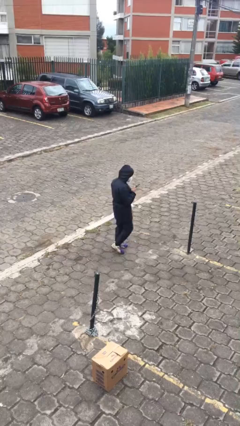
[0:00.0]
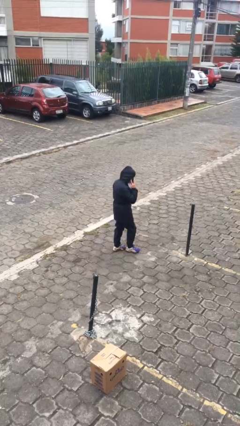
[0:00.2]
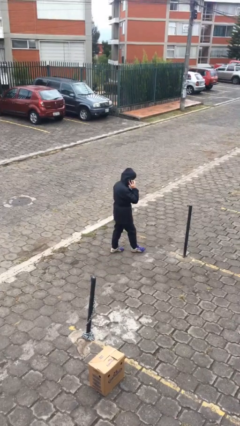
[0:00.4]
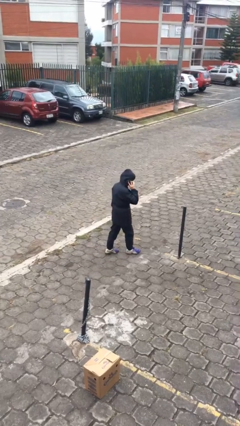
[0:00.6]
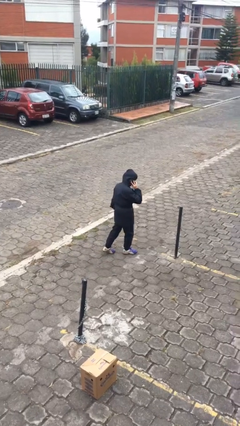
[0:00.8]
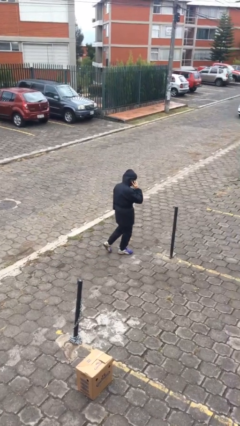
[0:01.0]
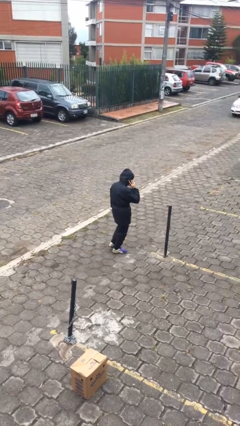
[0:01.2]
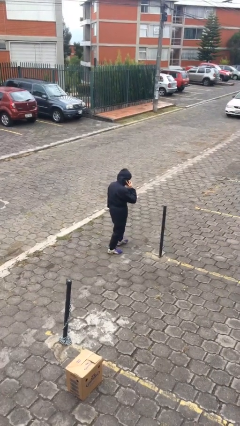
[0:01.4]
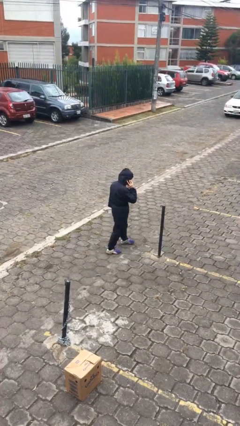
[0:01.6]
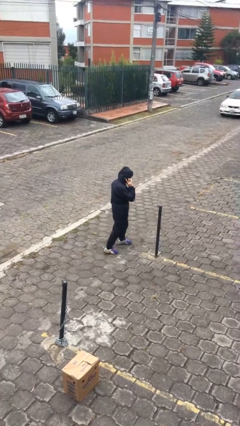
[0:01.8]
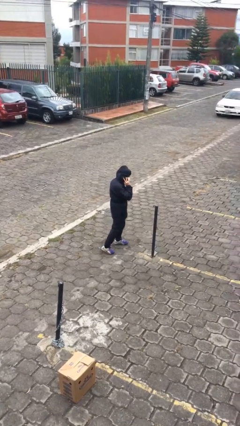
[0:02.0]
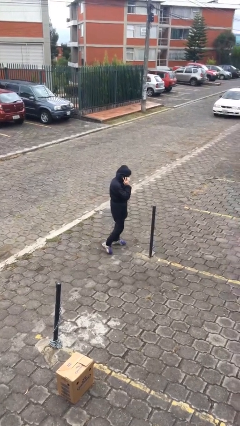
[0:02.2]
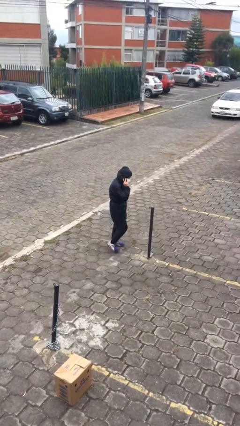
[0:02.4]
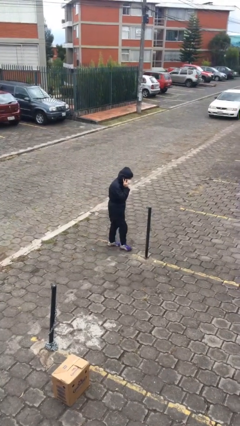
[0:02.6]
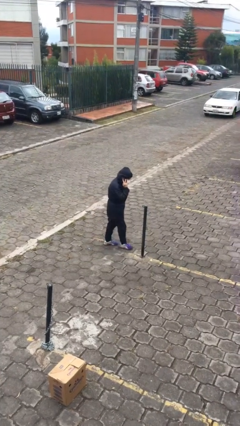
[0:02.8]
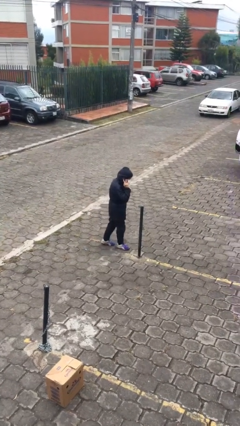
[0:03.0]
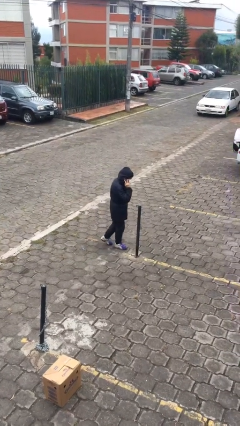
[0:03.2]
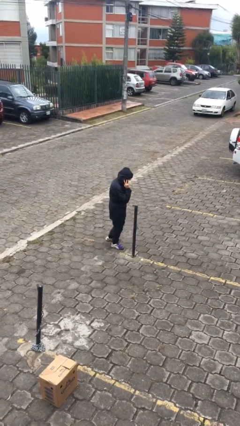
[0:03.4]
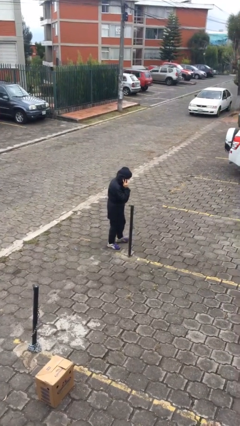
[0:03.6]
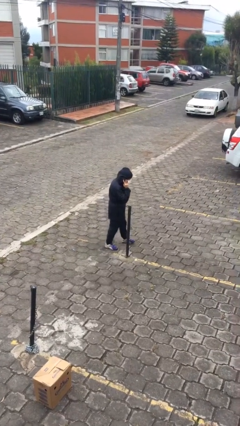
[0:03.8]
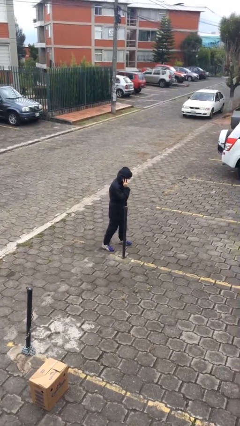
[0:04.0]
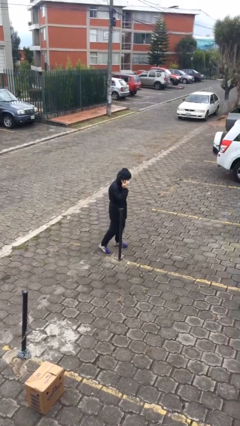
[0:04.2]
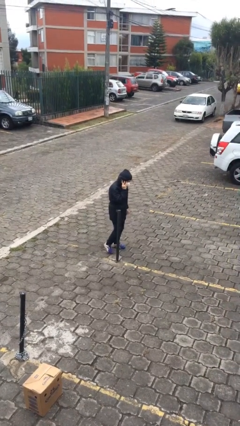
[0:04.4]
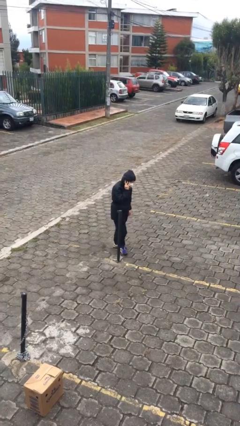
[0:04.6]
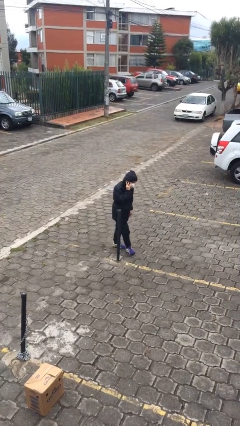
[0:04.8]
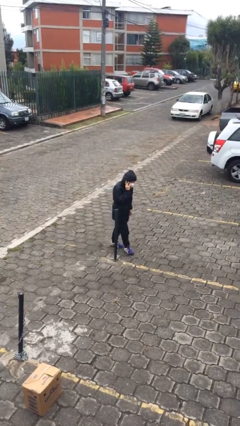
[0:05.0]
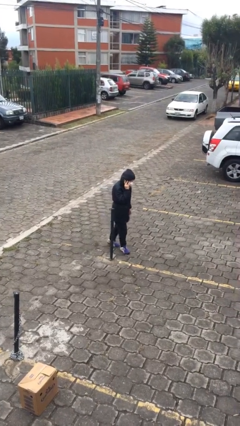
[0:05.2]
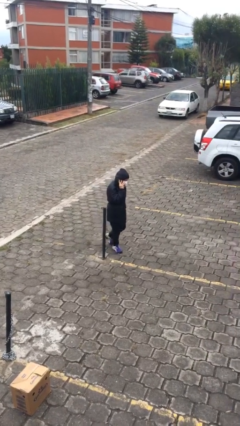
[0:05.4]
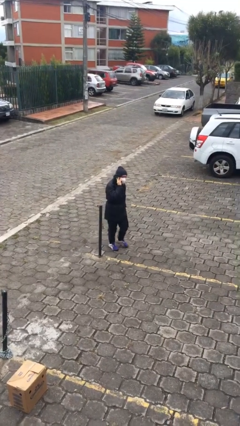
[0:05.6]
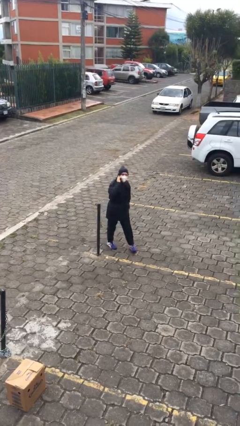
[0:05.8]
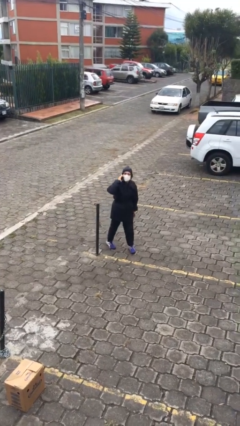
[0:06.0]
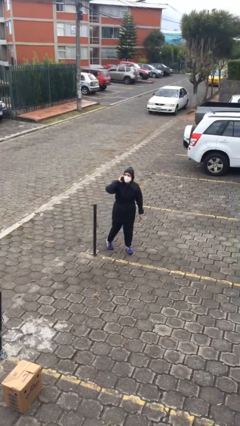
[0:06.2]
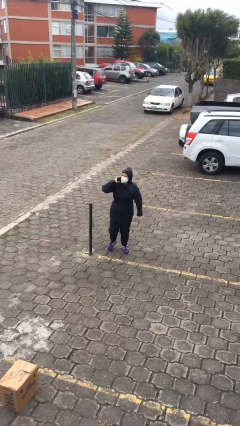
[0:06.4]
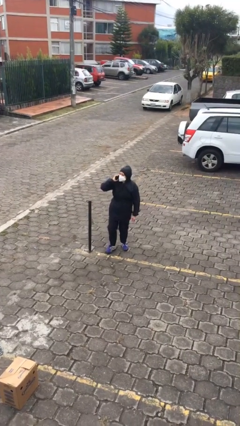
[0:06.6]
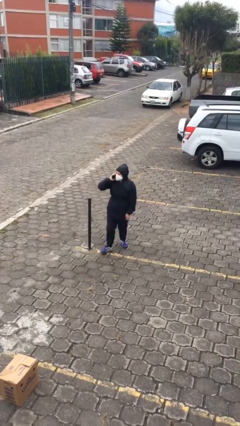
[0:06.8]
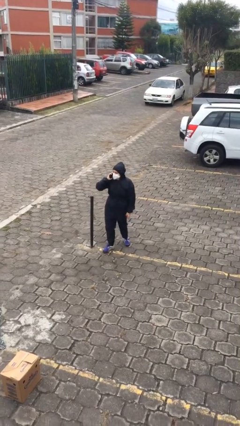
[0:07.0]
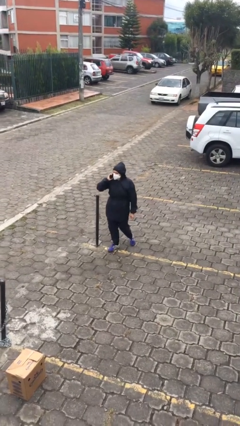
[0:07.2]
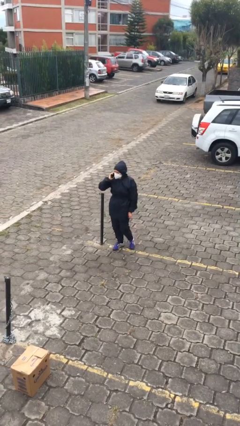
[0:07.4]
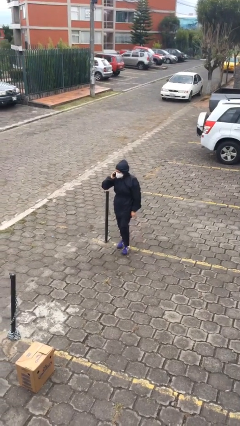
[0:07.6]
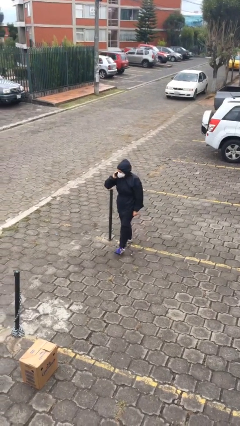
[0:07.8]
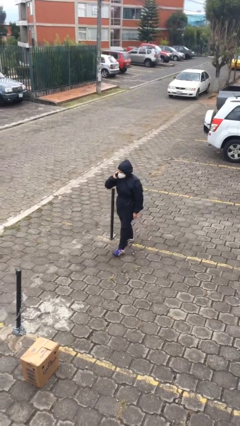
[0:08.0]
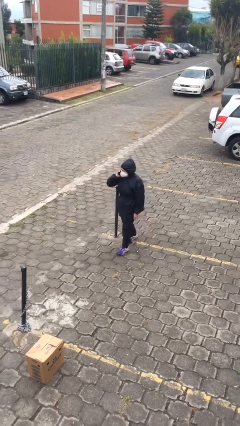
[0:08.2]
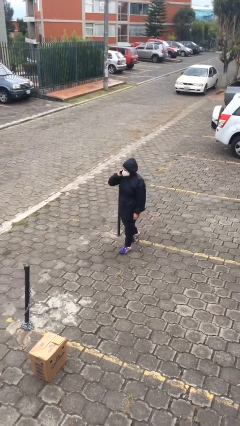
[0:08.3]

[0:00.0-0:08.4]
person talks on phone

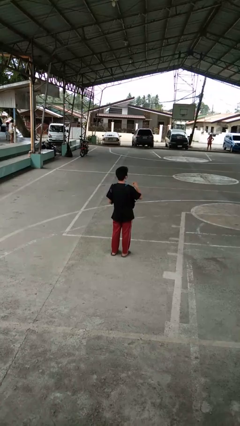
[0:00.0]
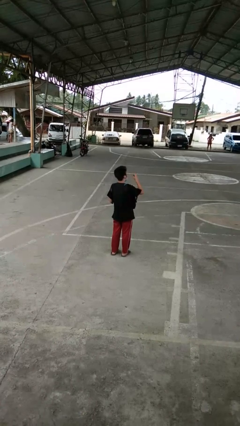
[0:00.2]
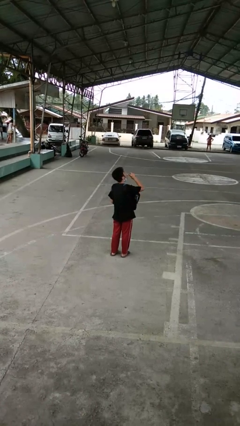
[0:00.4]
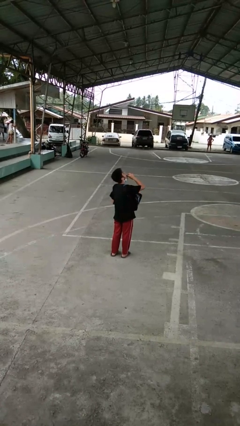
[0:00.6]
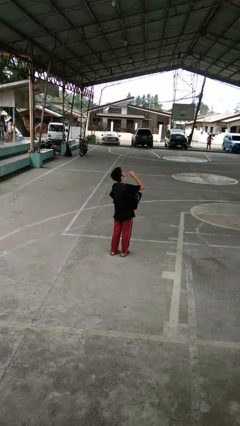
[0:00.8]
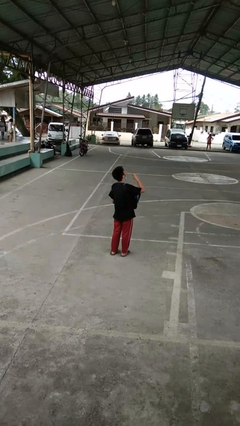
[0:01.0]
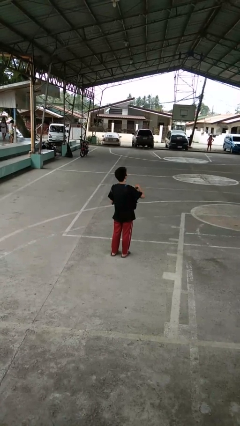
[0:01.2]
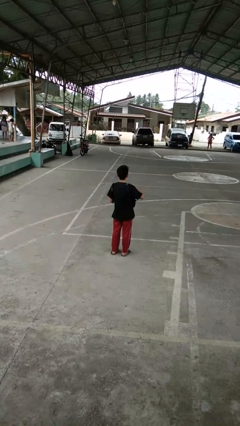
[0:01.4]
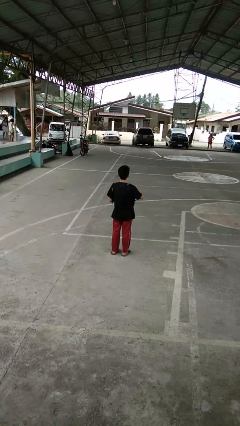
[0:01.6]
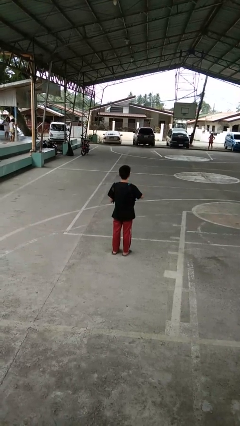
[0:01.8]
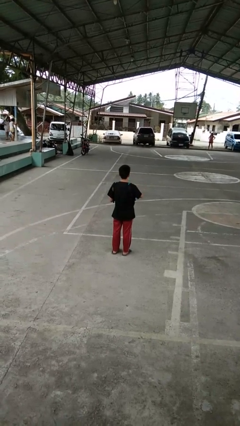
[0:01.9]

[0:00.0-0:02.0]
person eats snack from bag

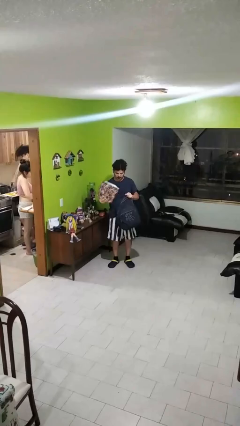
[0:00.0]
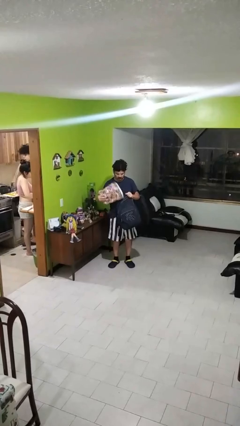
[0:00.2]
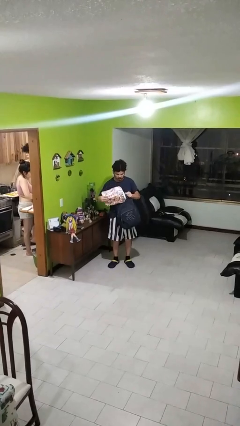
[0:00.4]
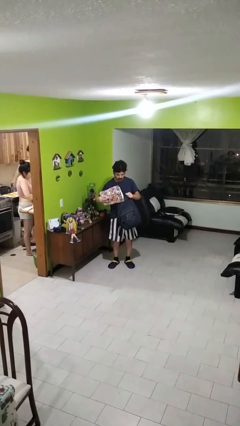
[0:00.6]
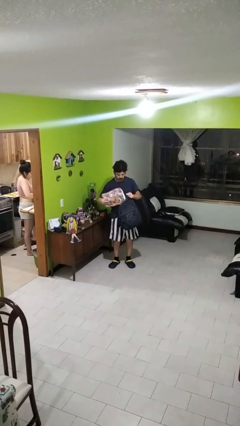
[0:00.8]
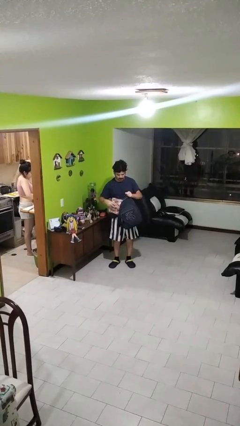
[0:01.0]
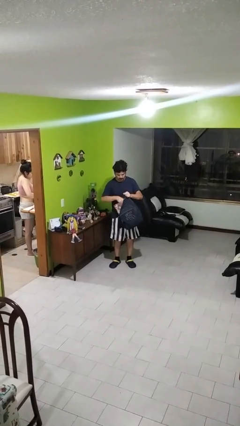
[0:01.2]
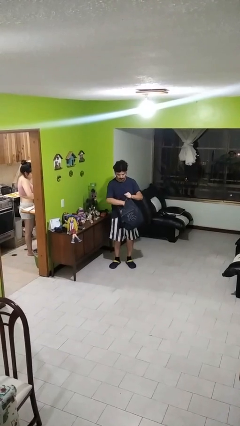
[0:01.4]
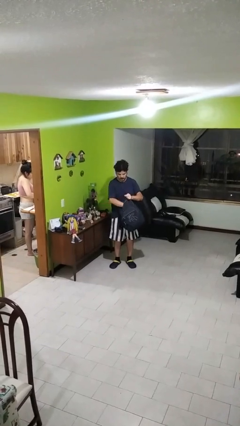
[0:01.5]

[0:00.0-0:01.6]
person puts object into purse

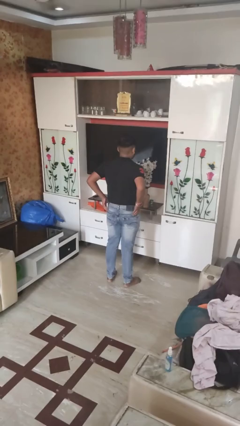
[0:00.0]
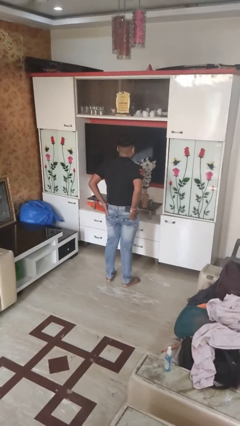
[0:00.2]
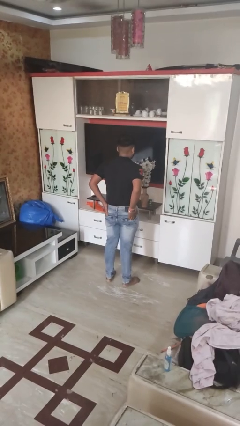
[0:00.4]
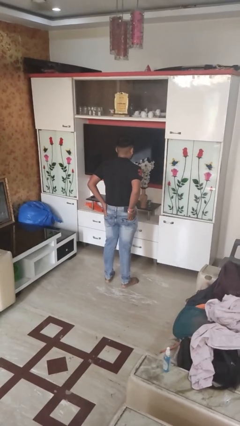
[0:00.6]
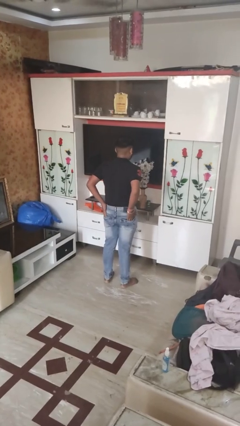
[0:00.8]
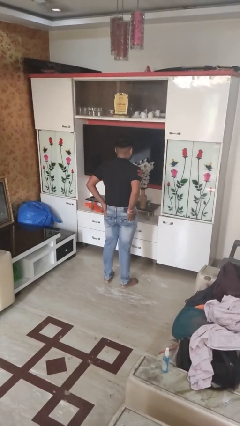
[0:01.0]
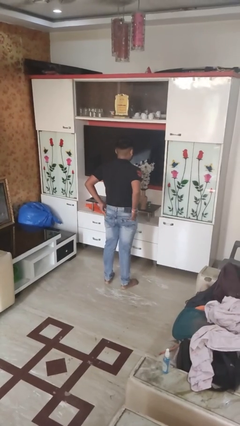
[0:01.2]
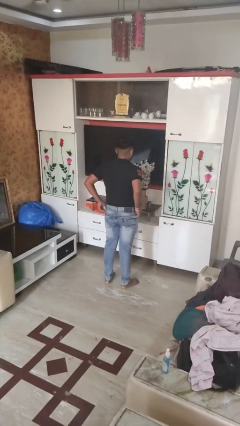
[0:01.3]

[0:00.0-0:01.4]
person puts hands in back pockets

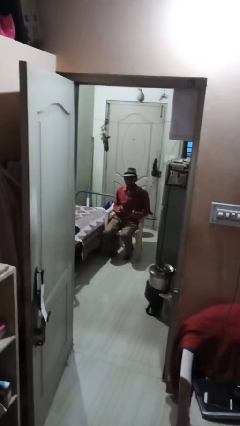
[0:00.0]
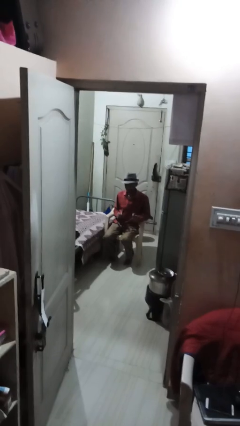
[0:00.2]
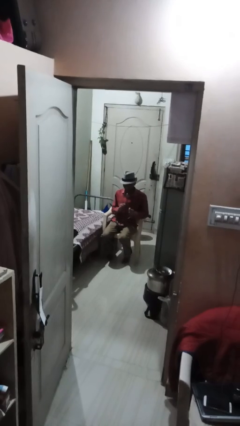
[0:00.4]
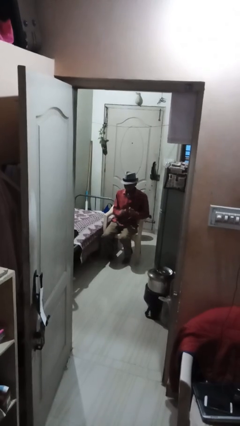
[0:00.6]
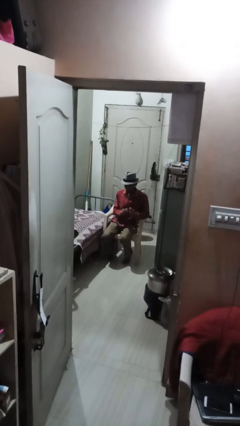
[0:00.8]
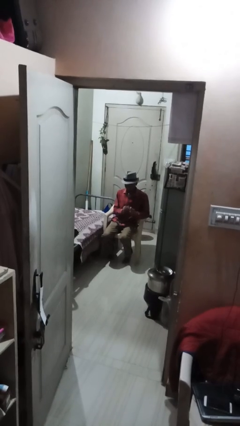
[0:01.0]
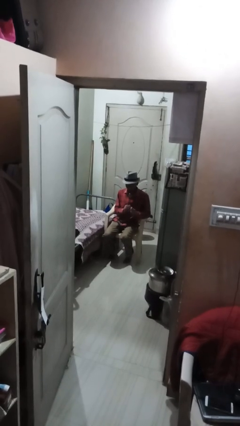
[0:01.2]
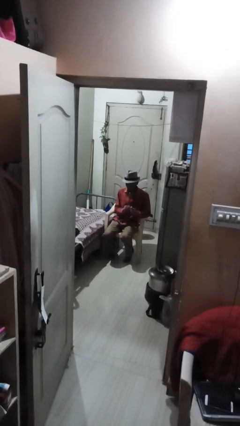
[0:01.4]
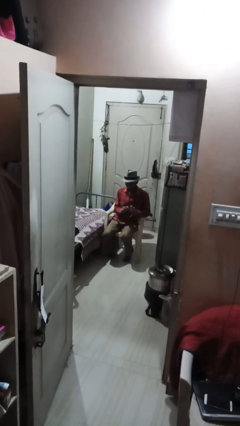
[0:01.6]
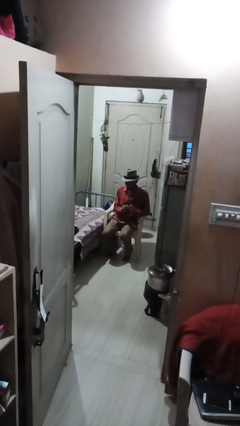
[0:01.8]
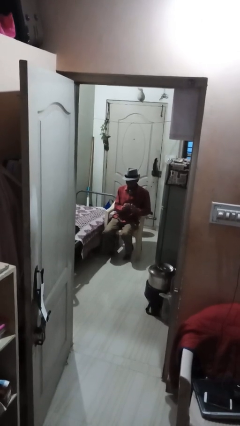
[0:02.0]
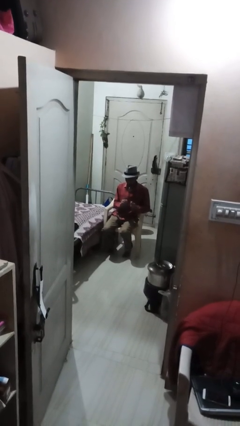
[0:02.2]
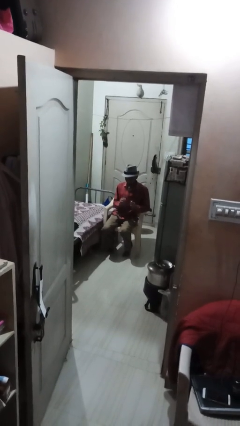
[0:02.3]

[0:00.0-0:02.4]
person files fingernails

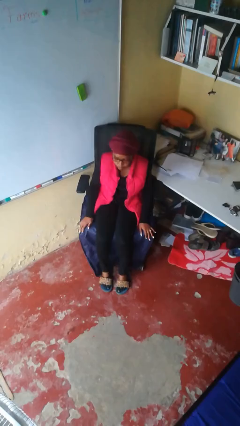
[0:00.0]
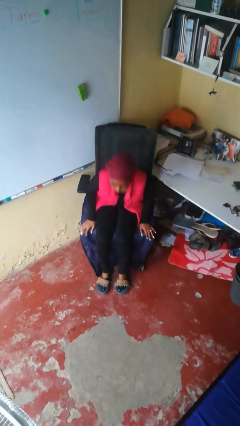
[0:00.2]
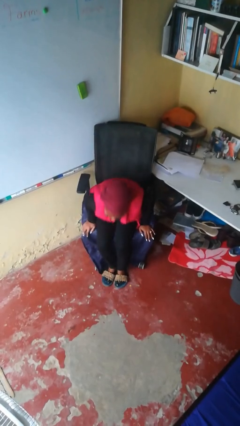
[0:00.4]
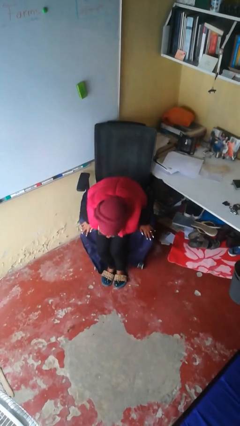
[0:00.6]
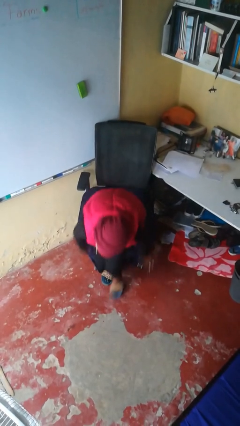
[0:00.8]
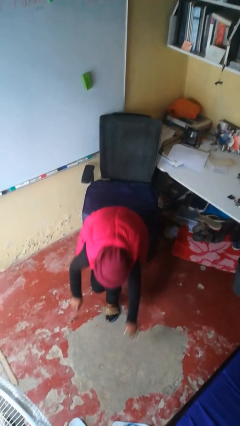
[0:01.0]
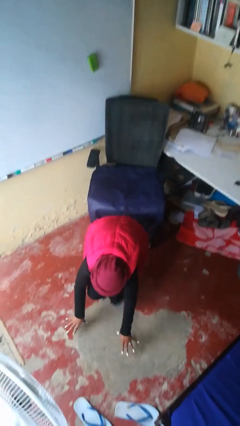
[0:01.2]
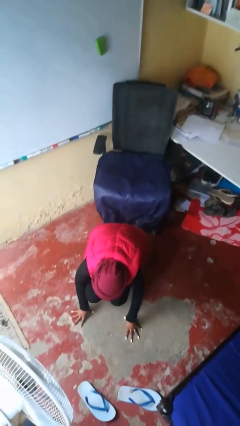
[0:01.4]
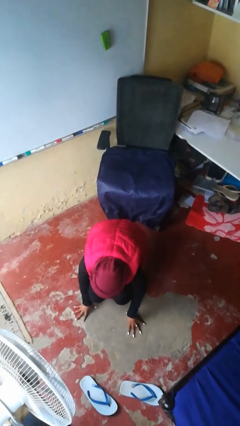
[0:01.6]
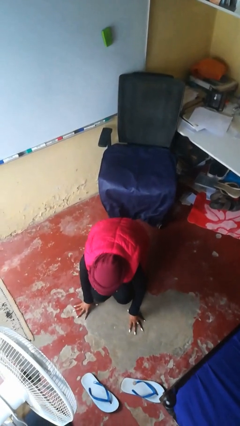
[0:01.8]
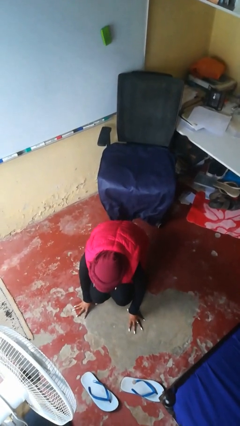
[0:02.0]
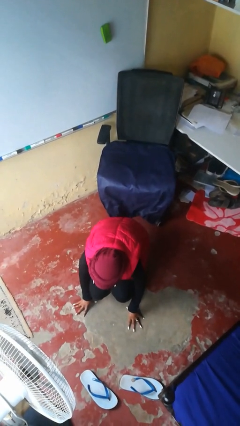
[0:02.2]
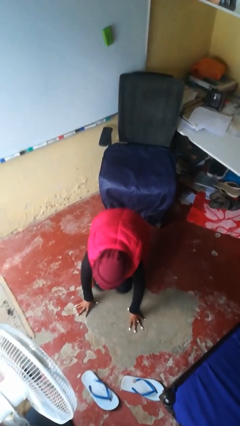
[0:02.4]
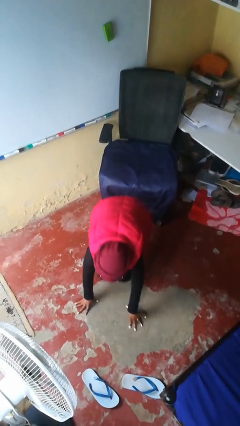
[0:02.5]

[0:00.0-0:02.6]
person falls from chair
